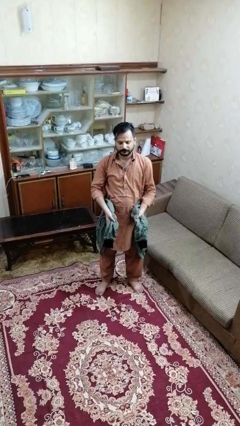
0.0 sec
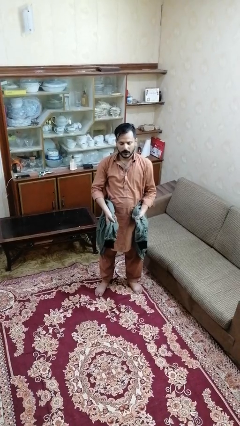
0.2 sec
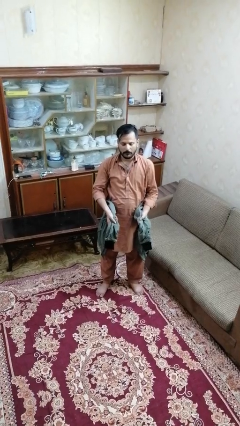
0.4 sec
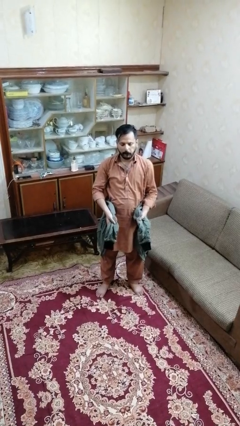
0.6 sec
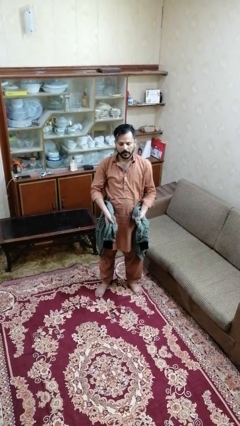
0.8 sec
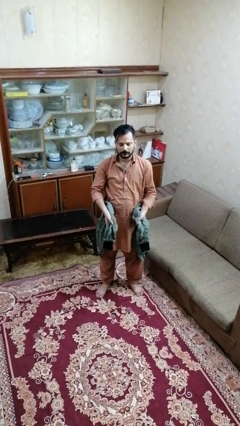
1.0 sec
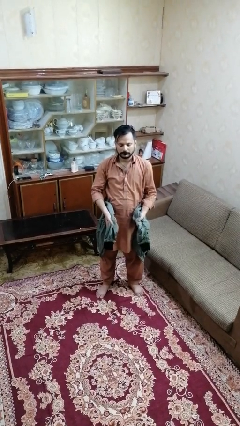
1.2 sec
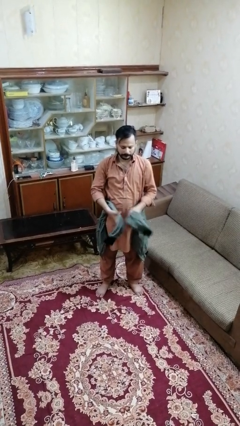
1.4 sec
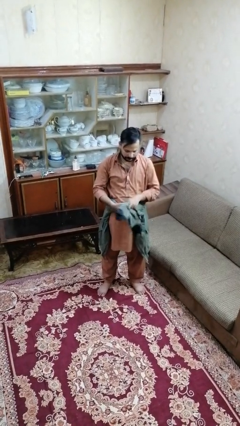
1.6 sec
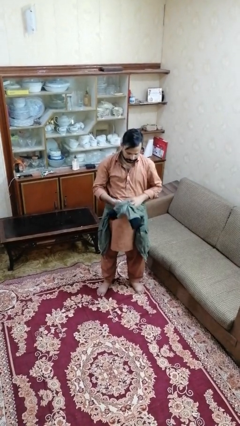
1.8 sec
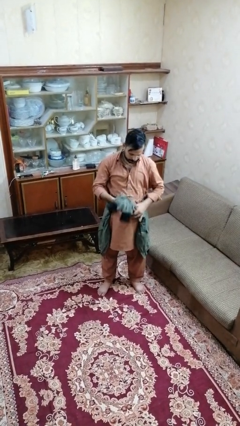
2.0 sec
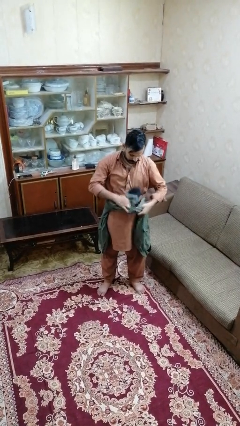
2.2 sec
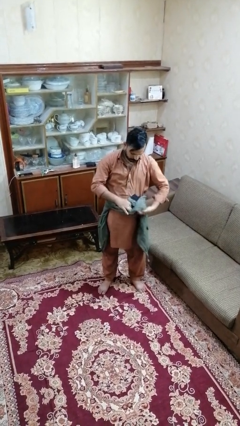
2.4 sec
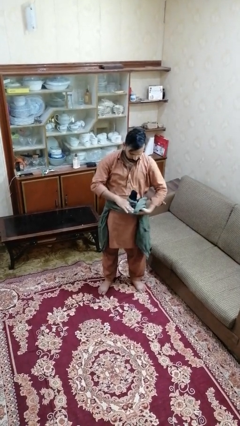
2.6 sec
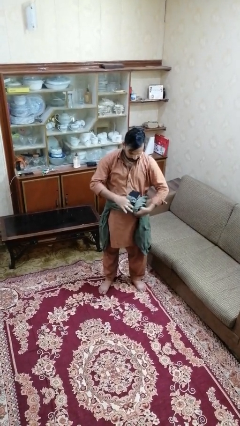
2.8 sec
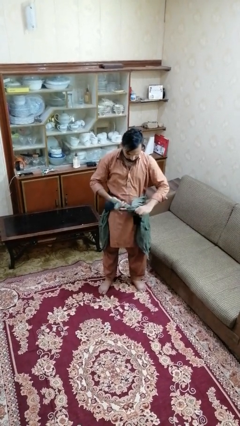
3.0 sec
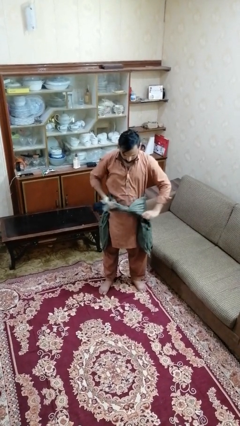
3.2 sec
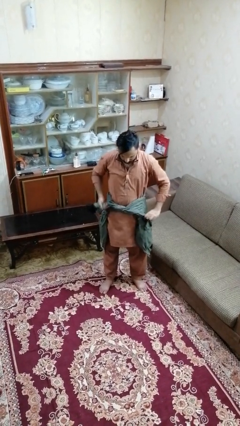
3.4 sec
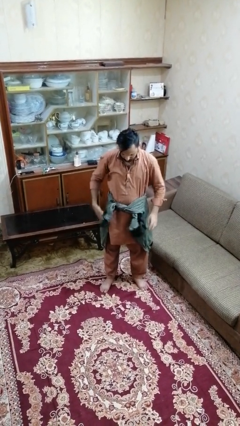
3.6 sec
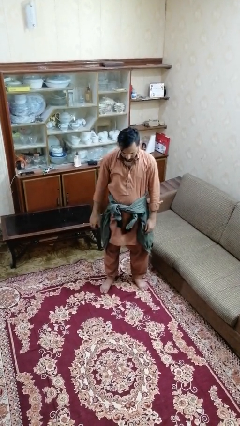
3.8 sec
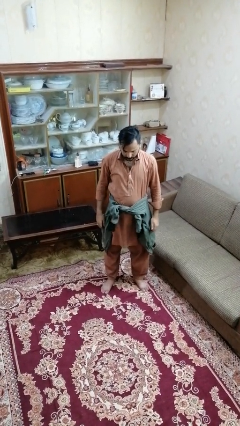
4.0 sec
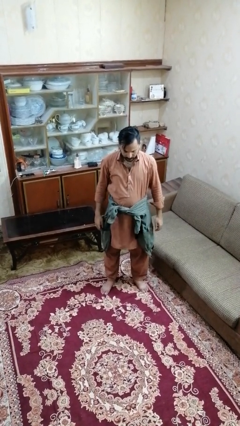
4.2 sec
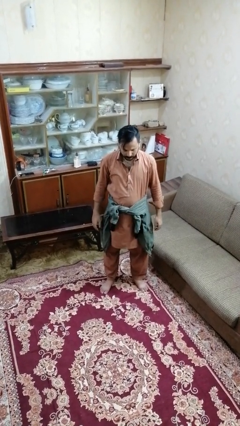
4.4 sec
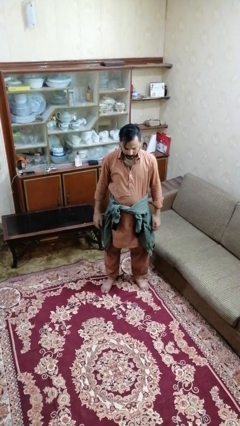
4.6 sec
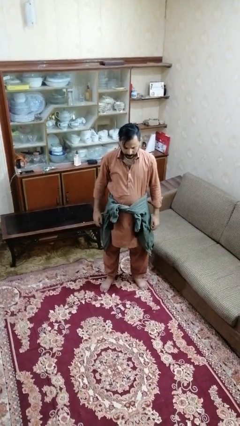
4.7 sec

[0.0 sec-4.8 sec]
person ties jacket around waist

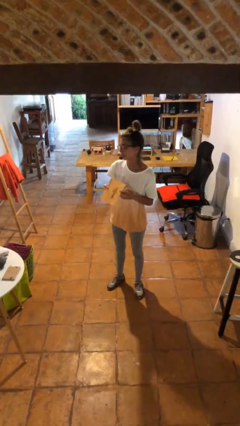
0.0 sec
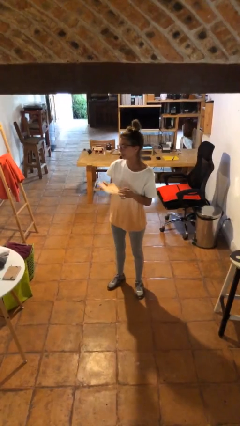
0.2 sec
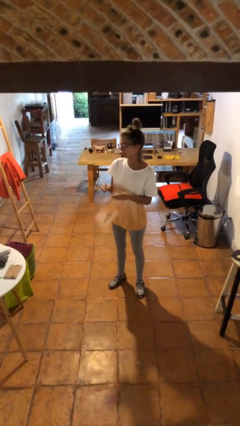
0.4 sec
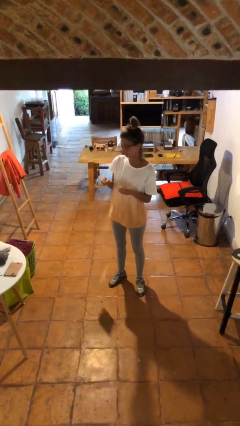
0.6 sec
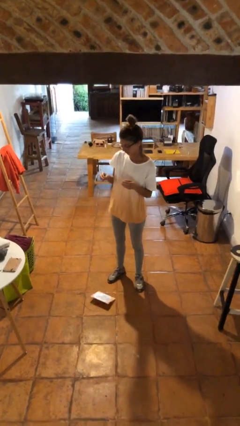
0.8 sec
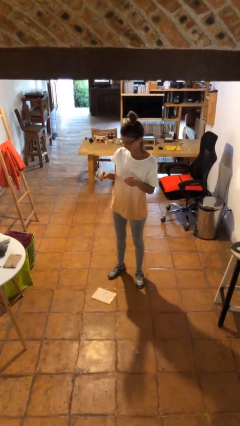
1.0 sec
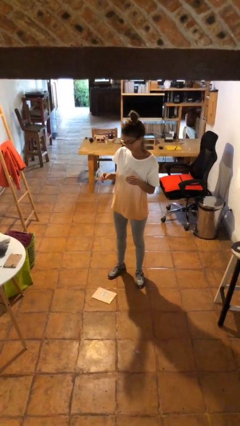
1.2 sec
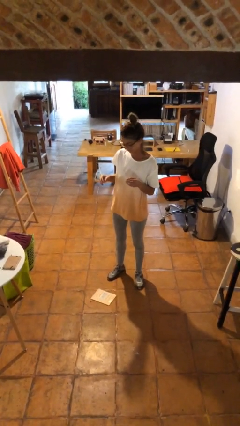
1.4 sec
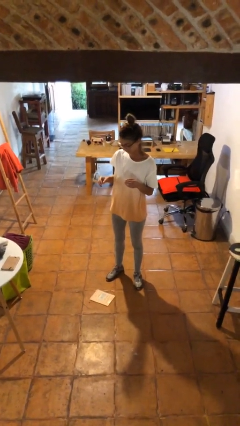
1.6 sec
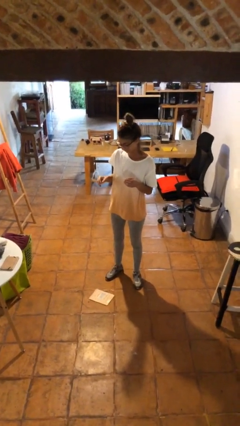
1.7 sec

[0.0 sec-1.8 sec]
person drops object

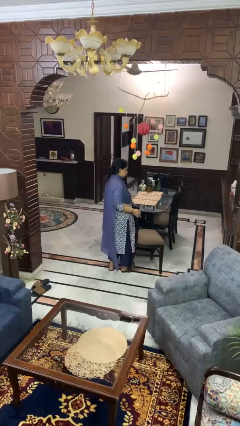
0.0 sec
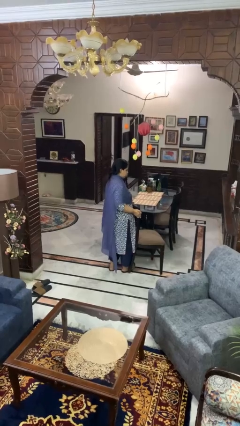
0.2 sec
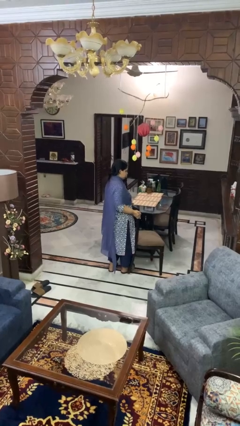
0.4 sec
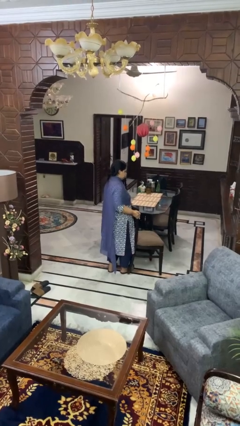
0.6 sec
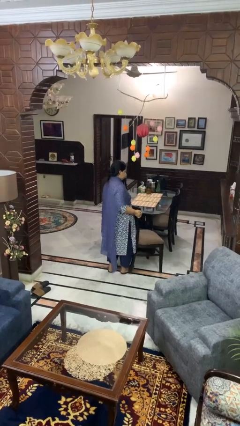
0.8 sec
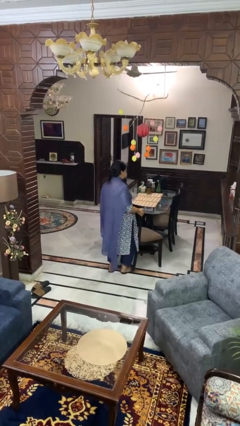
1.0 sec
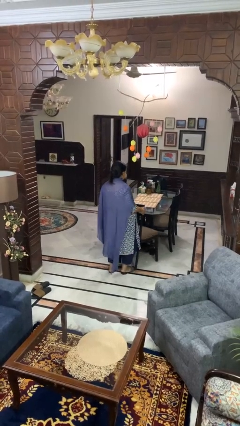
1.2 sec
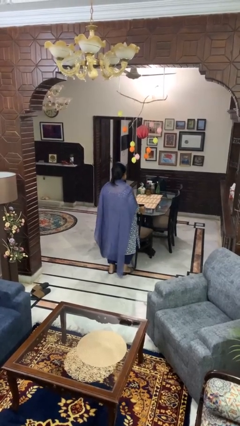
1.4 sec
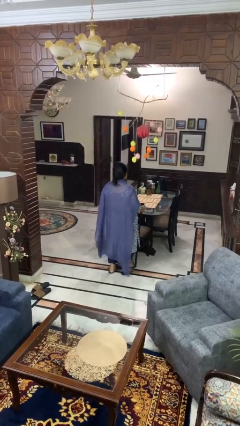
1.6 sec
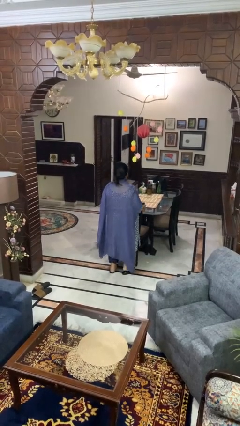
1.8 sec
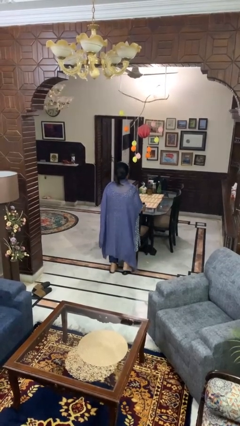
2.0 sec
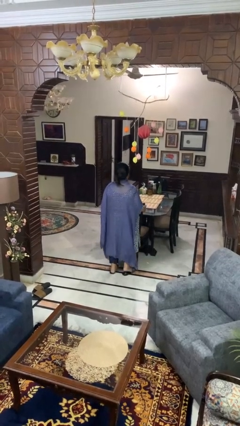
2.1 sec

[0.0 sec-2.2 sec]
person pushes in chair

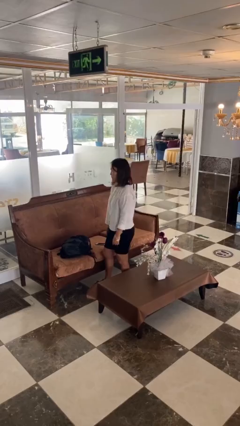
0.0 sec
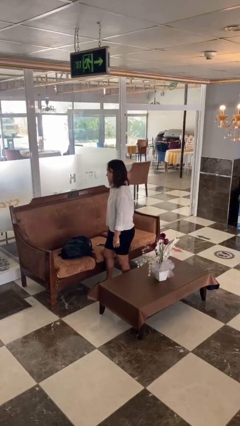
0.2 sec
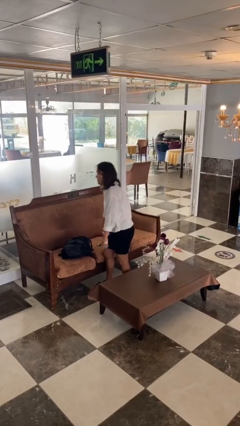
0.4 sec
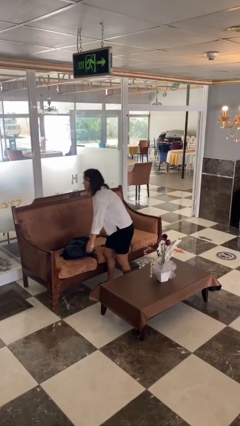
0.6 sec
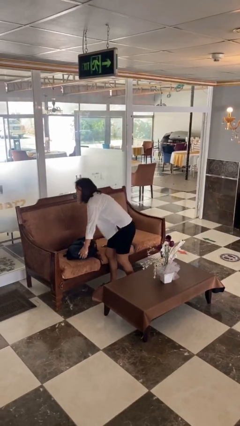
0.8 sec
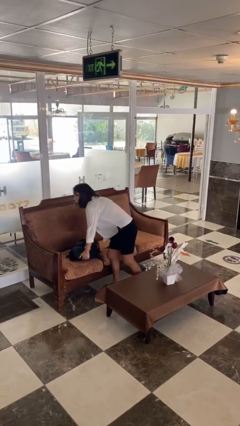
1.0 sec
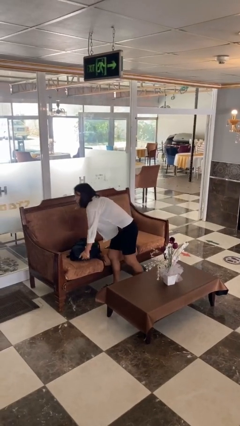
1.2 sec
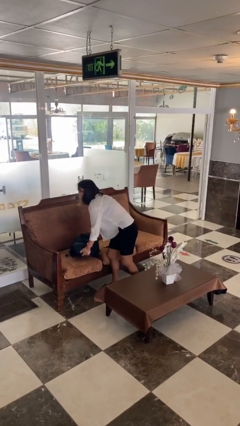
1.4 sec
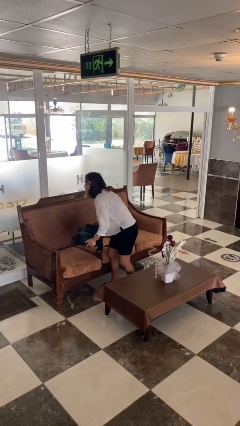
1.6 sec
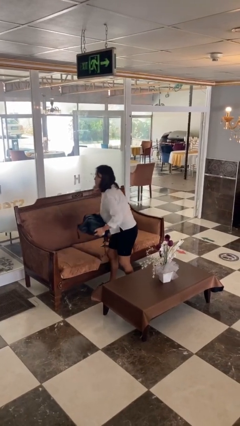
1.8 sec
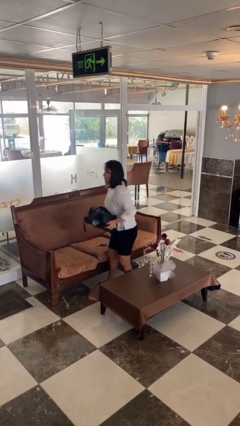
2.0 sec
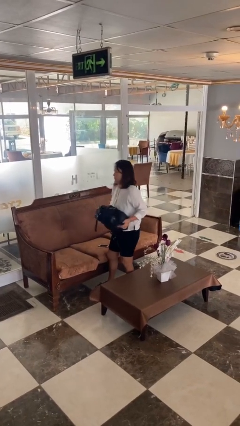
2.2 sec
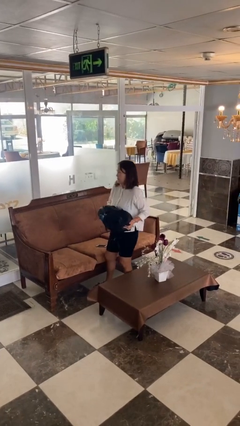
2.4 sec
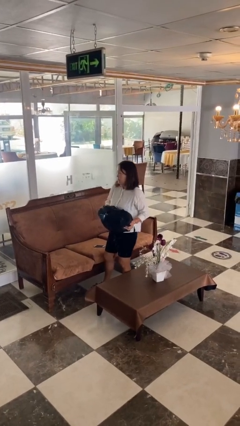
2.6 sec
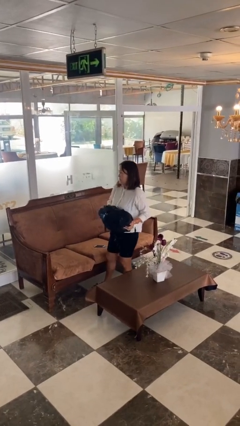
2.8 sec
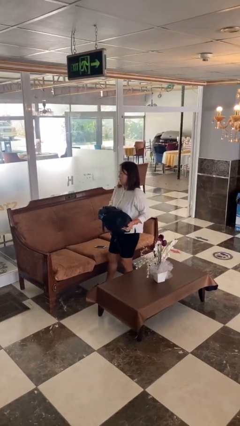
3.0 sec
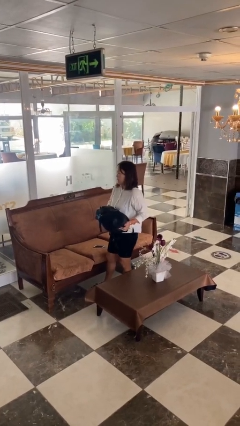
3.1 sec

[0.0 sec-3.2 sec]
person picks up object from couch

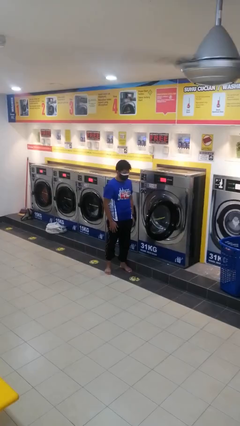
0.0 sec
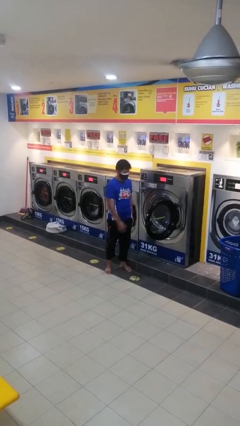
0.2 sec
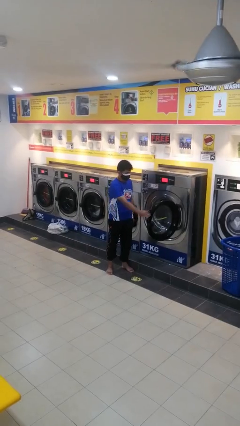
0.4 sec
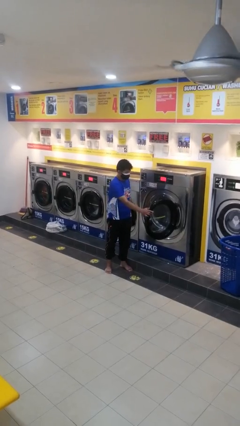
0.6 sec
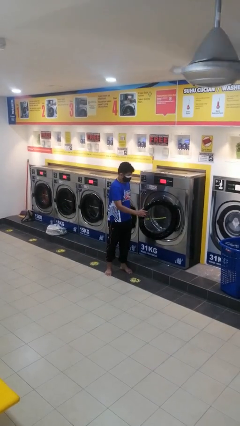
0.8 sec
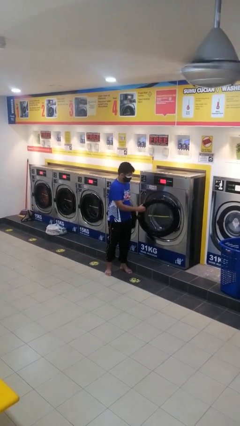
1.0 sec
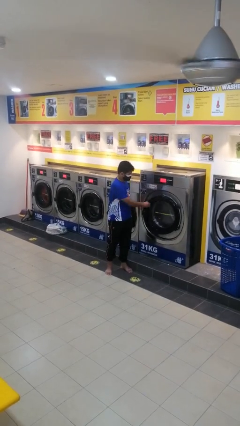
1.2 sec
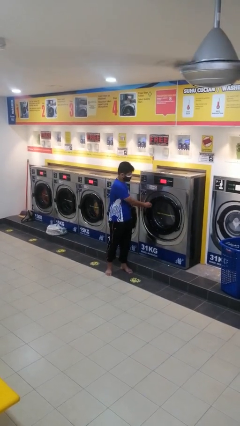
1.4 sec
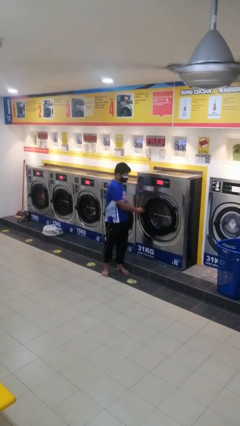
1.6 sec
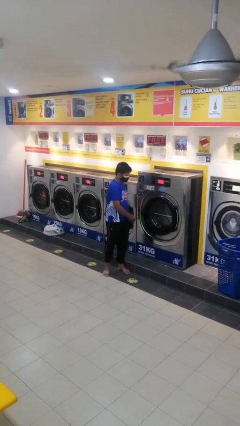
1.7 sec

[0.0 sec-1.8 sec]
person closes clothes washer

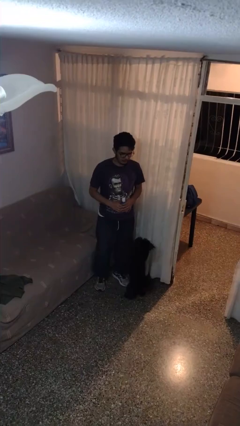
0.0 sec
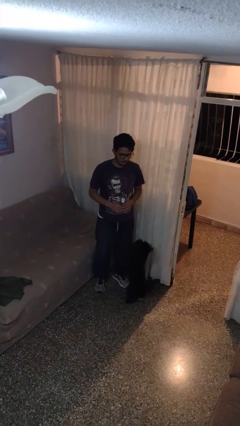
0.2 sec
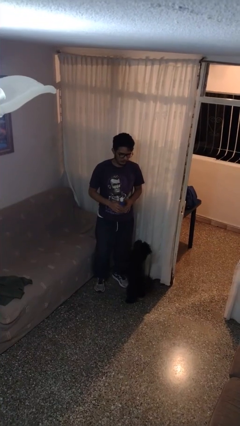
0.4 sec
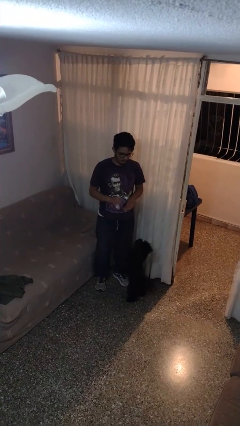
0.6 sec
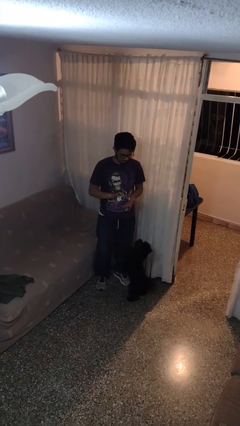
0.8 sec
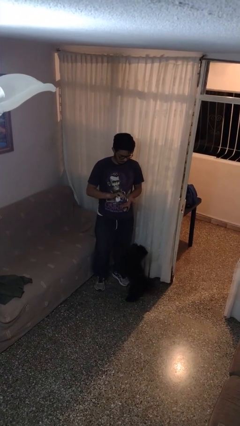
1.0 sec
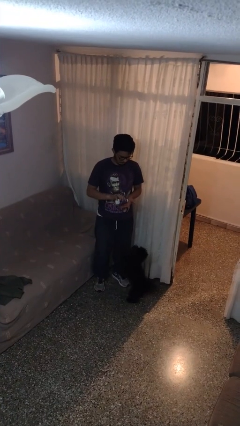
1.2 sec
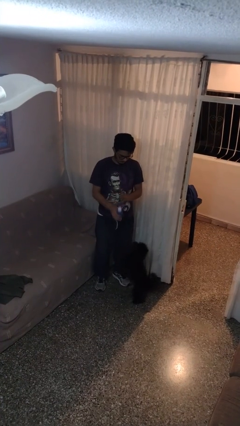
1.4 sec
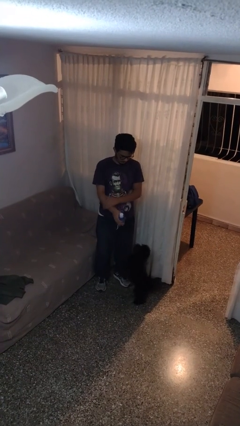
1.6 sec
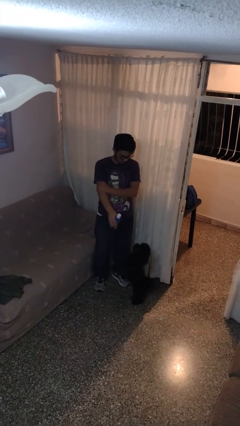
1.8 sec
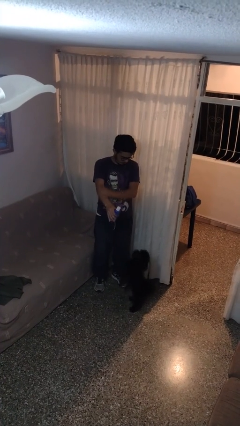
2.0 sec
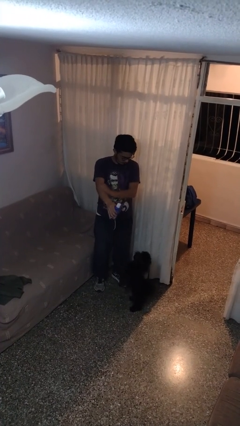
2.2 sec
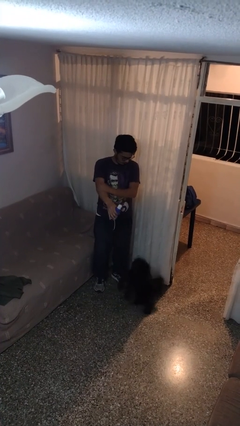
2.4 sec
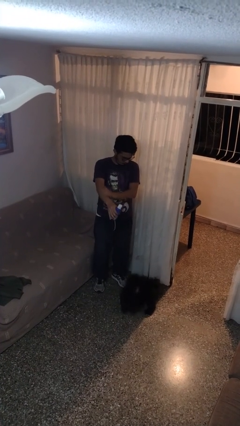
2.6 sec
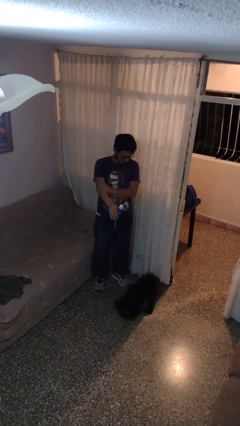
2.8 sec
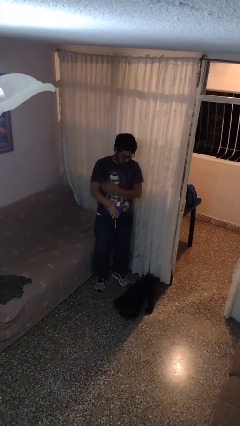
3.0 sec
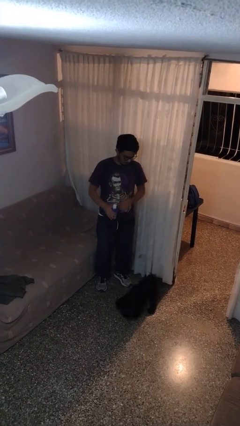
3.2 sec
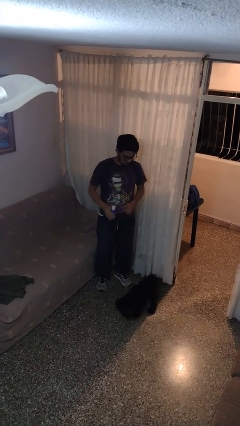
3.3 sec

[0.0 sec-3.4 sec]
person applies sunscreen
